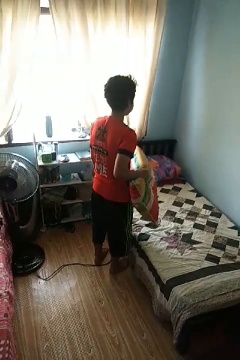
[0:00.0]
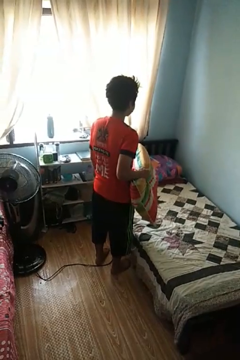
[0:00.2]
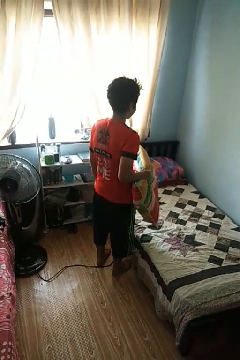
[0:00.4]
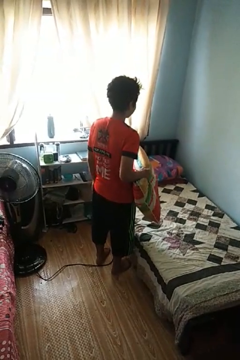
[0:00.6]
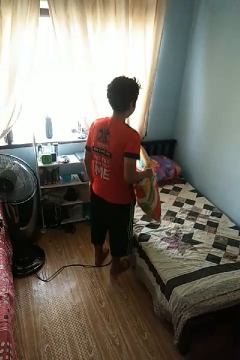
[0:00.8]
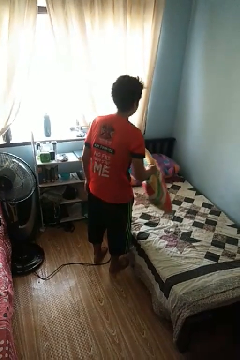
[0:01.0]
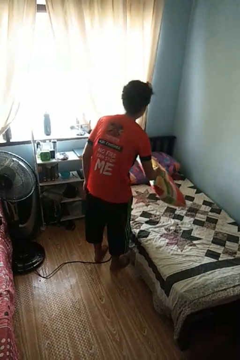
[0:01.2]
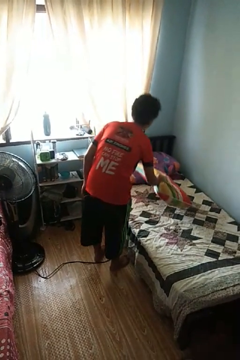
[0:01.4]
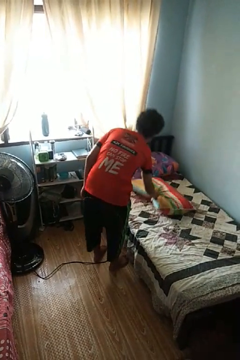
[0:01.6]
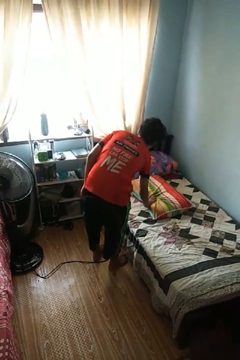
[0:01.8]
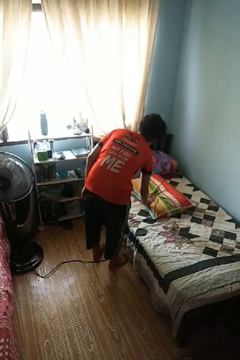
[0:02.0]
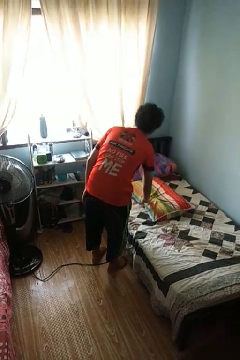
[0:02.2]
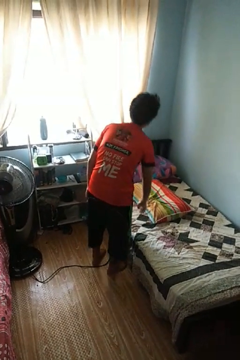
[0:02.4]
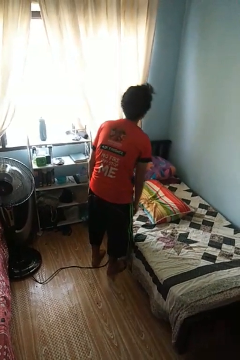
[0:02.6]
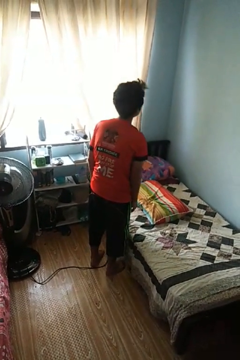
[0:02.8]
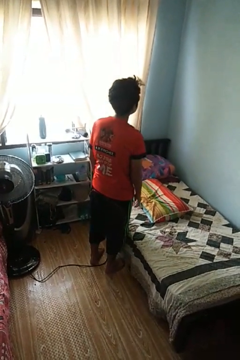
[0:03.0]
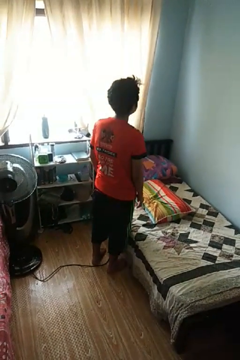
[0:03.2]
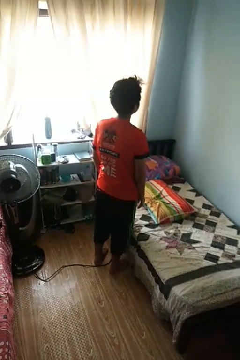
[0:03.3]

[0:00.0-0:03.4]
person puts down object on bed

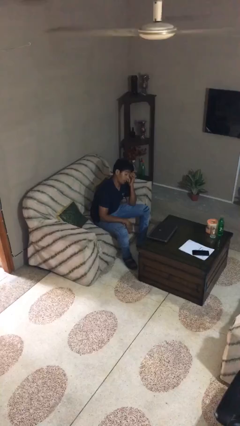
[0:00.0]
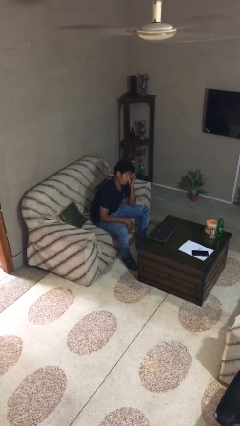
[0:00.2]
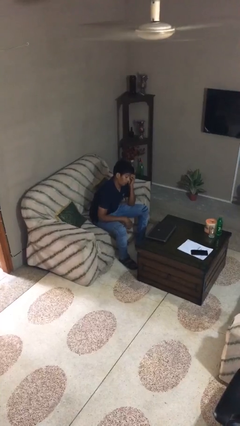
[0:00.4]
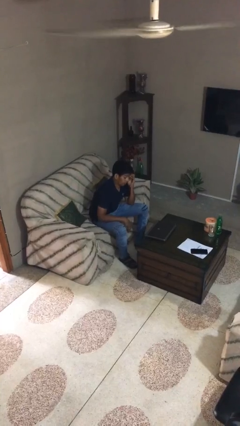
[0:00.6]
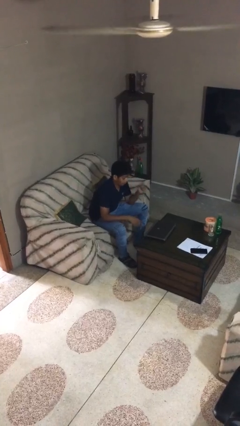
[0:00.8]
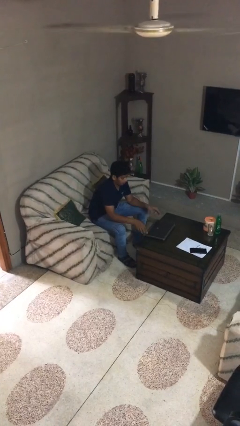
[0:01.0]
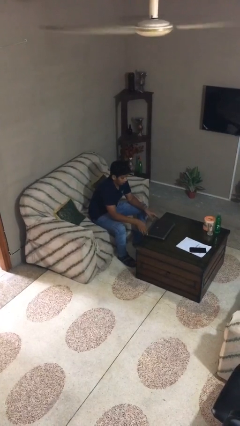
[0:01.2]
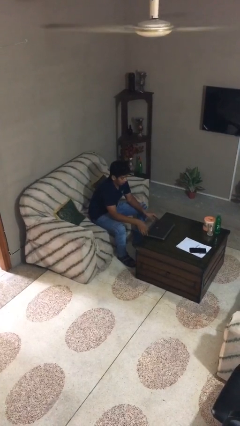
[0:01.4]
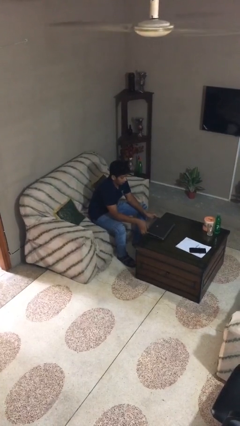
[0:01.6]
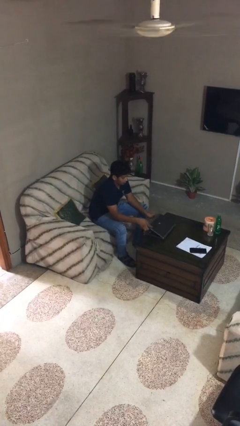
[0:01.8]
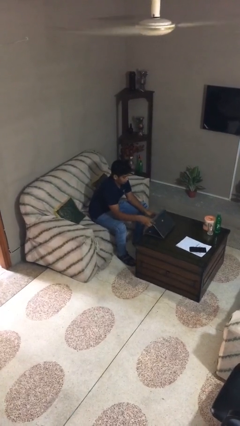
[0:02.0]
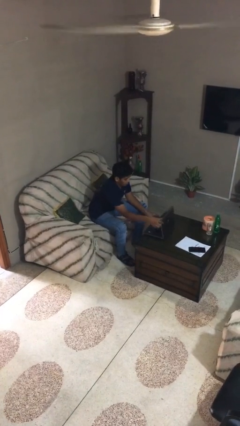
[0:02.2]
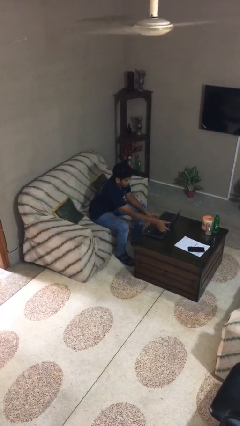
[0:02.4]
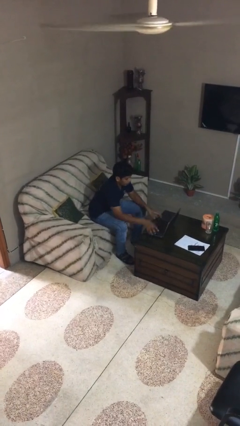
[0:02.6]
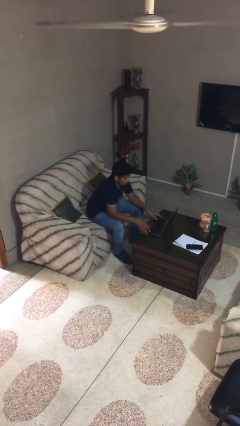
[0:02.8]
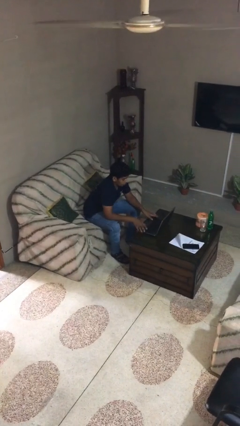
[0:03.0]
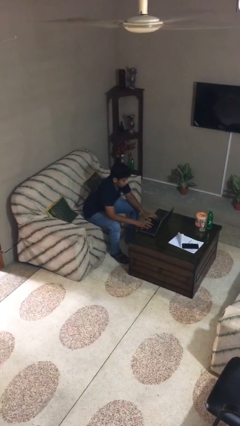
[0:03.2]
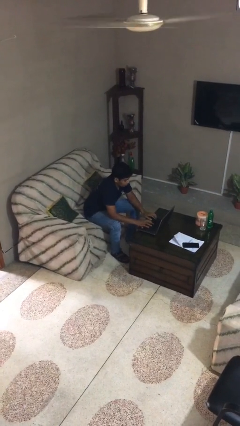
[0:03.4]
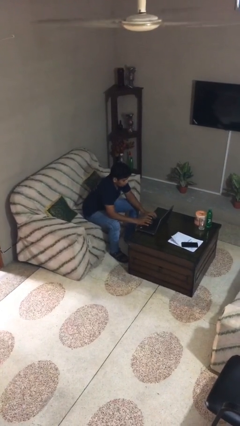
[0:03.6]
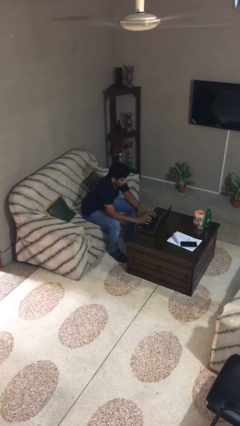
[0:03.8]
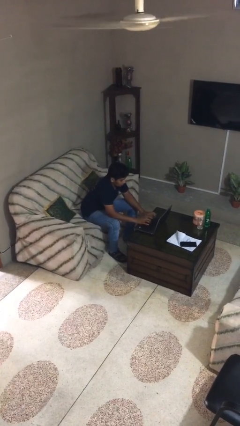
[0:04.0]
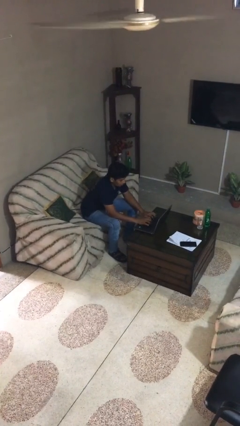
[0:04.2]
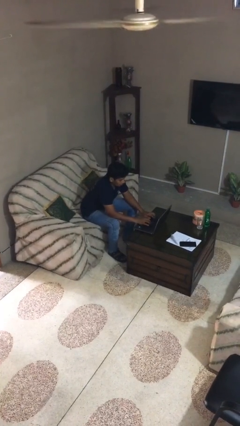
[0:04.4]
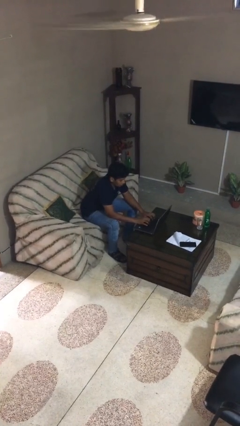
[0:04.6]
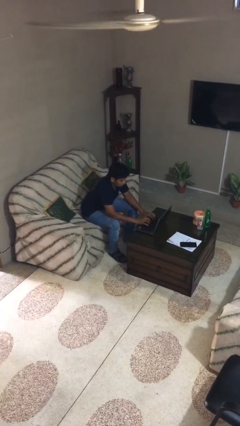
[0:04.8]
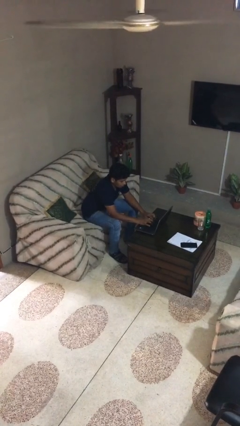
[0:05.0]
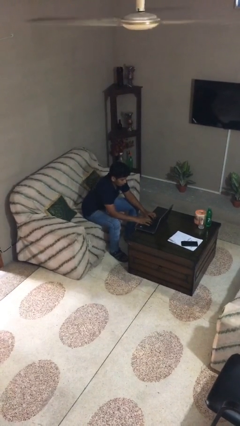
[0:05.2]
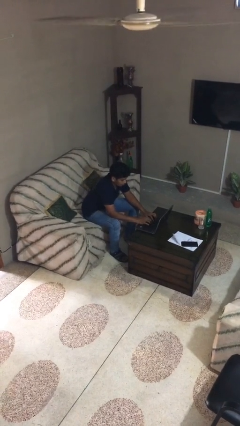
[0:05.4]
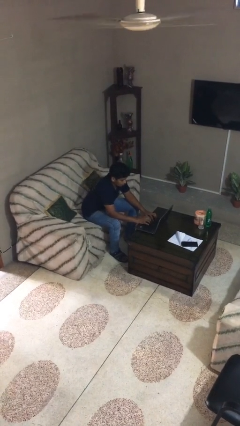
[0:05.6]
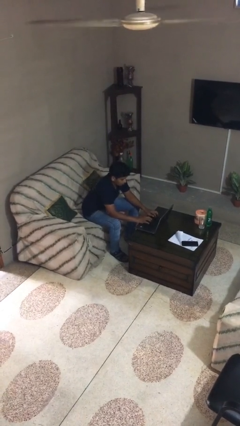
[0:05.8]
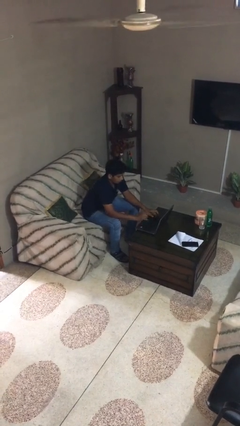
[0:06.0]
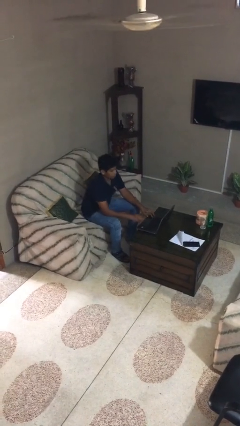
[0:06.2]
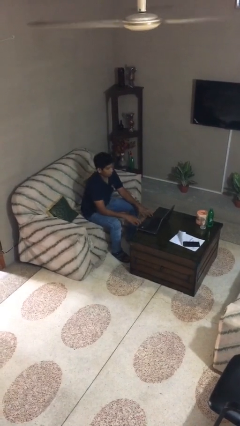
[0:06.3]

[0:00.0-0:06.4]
person interacts with laptop

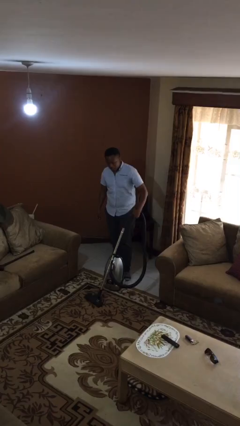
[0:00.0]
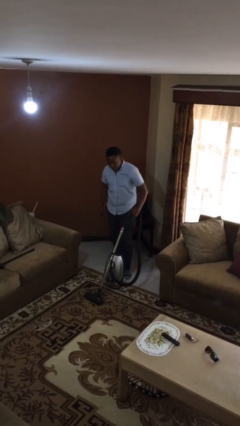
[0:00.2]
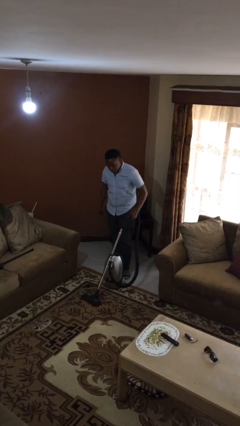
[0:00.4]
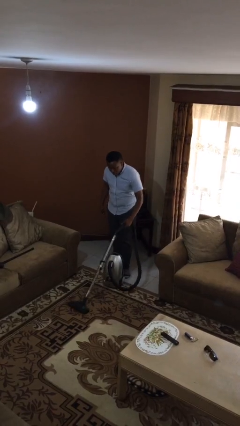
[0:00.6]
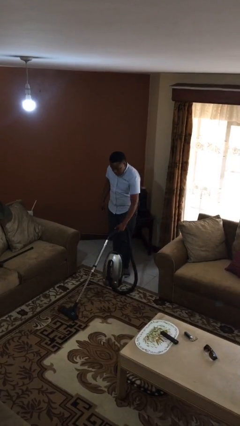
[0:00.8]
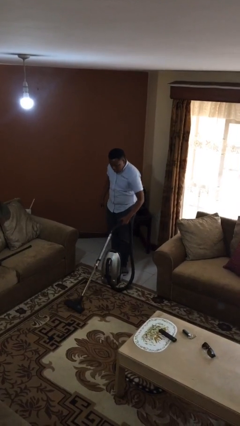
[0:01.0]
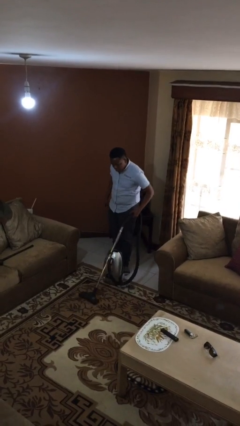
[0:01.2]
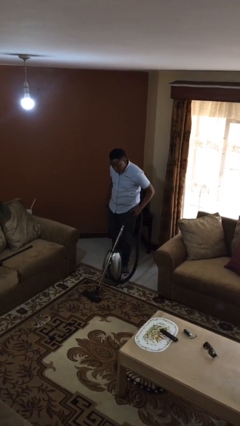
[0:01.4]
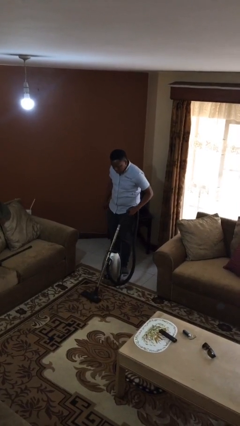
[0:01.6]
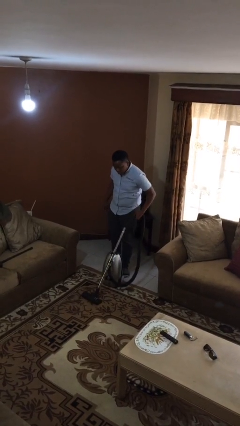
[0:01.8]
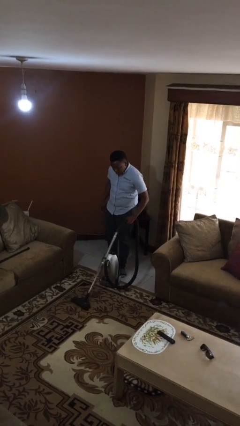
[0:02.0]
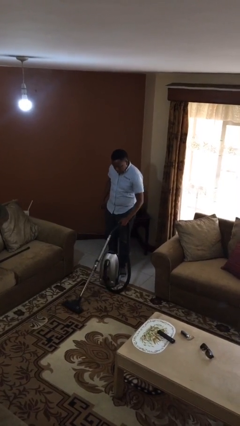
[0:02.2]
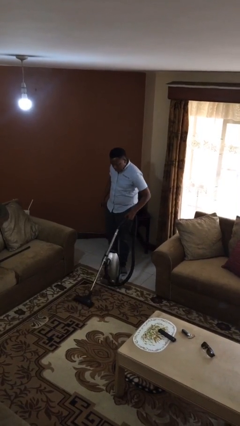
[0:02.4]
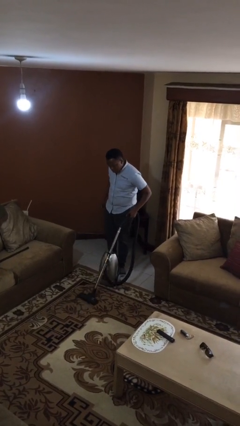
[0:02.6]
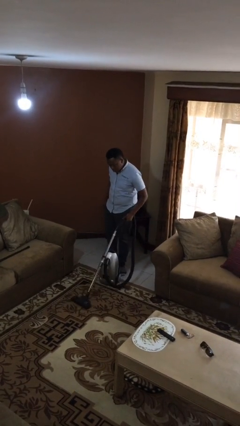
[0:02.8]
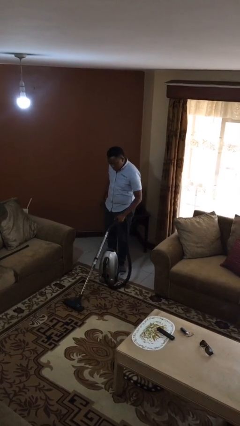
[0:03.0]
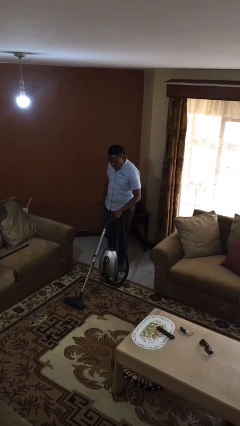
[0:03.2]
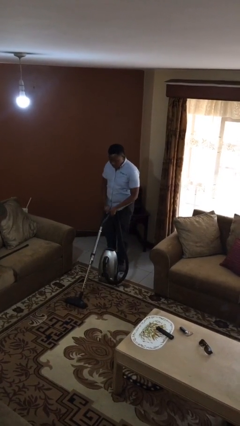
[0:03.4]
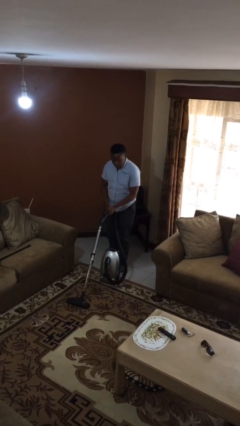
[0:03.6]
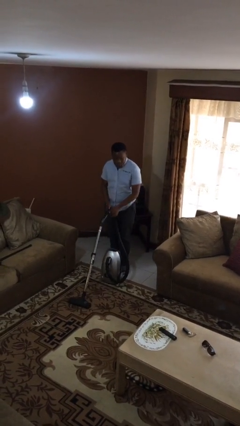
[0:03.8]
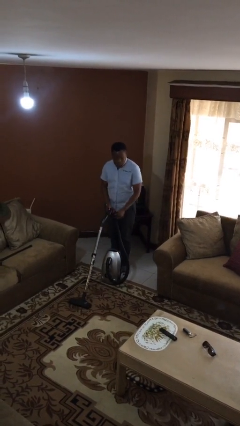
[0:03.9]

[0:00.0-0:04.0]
person vacuums carpet

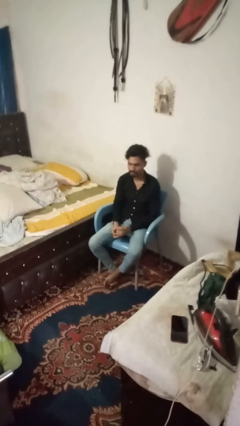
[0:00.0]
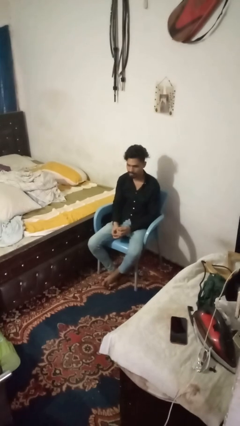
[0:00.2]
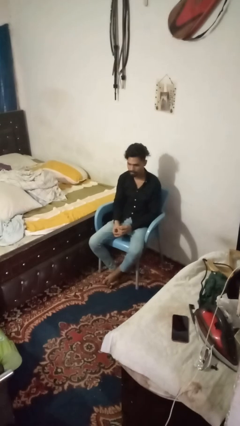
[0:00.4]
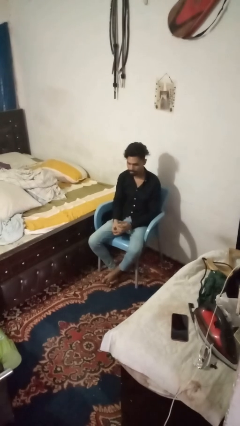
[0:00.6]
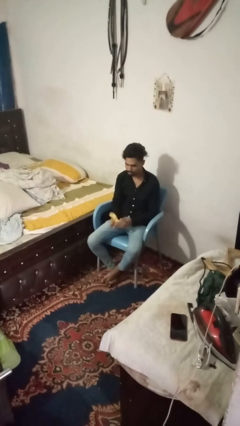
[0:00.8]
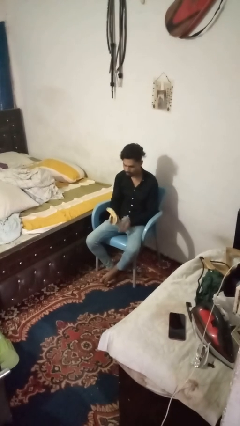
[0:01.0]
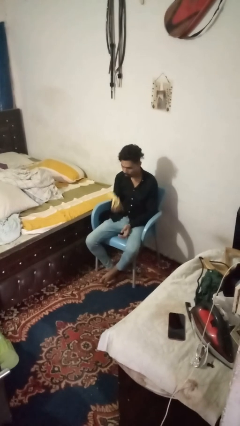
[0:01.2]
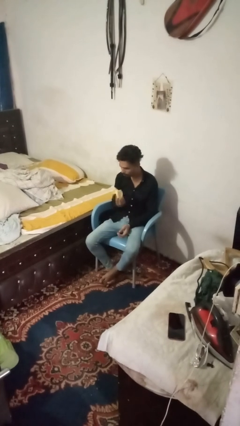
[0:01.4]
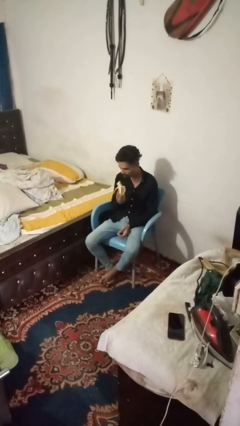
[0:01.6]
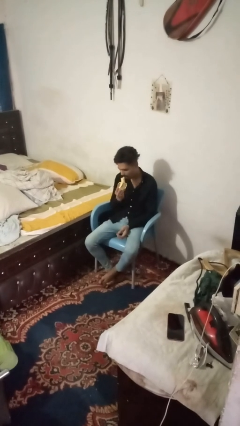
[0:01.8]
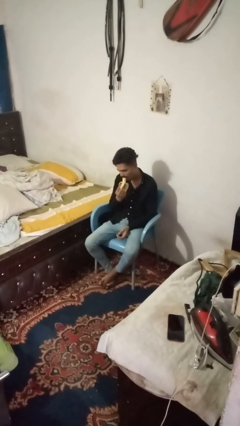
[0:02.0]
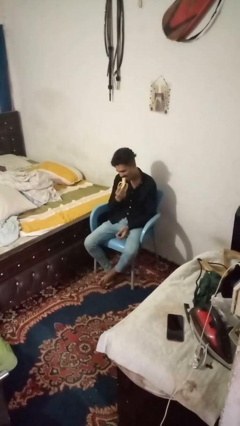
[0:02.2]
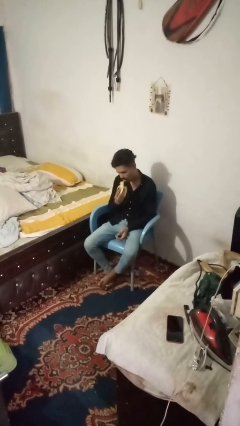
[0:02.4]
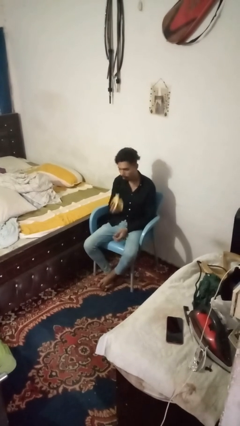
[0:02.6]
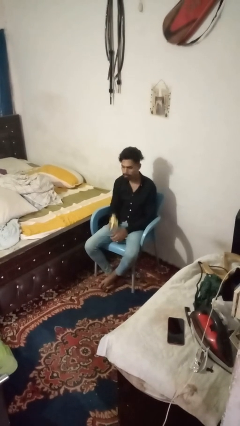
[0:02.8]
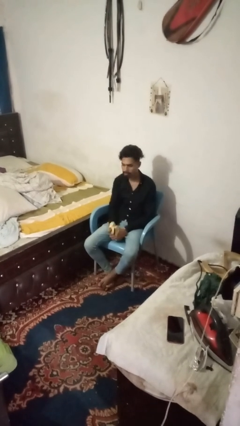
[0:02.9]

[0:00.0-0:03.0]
person eats banana

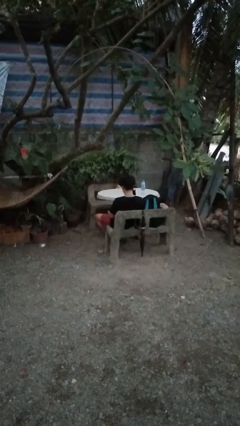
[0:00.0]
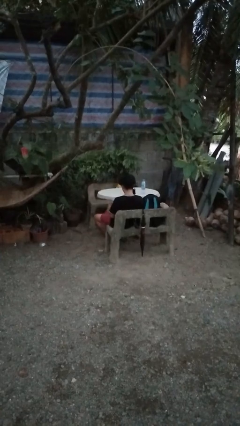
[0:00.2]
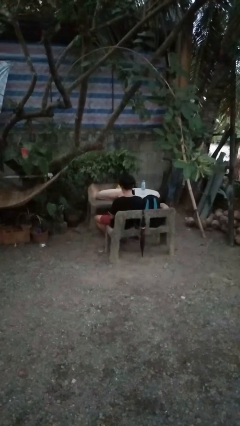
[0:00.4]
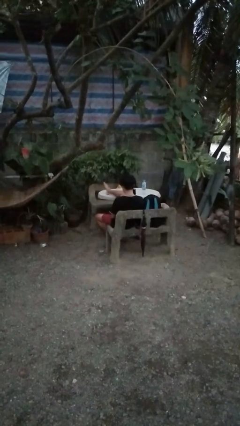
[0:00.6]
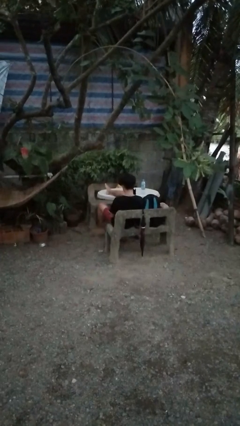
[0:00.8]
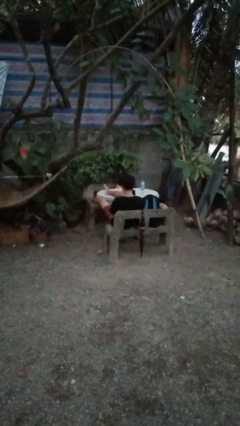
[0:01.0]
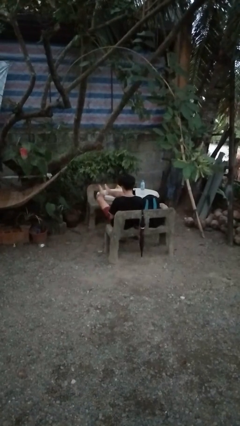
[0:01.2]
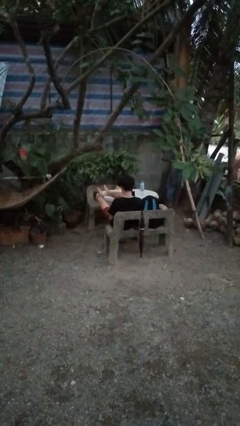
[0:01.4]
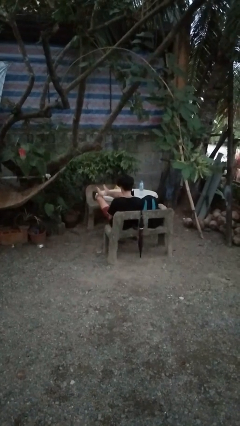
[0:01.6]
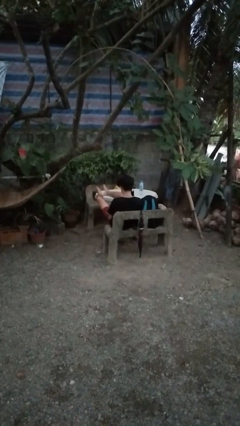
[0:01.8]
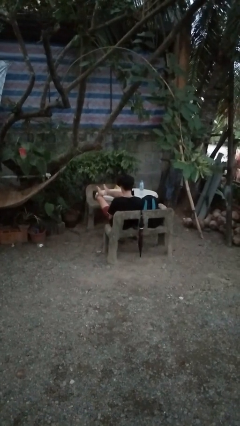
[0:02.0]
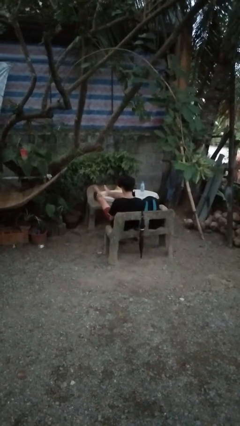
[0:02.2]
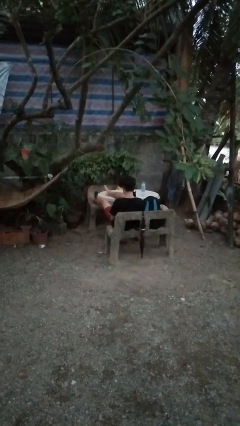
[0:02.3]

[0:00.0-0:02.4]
person puts feet up
